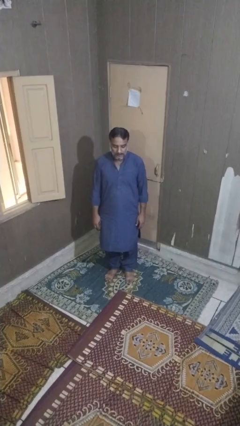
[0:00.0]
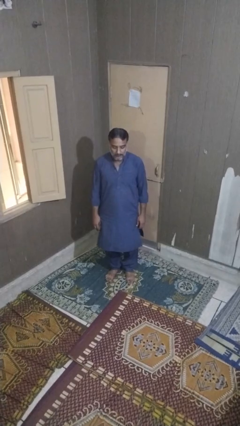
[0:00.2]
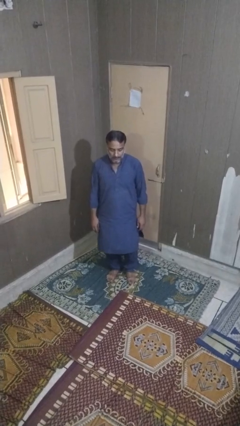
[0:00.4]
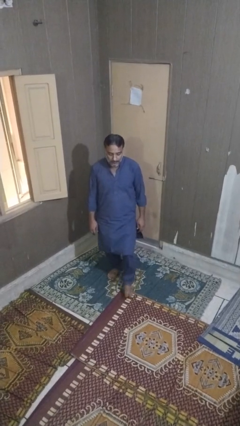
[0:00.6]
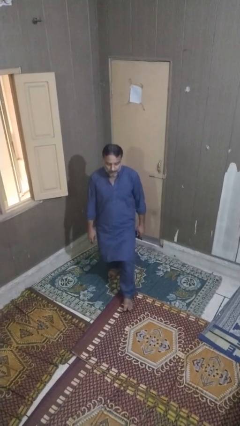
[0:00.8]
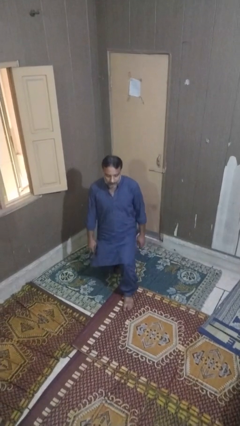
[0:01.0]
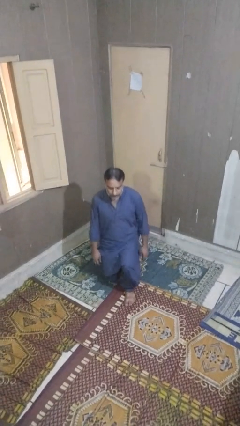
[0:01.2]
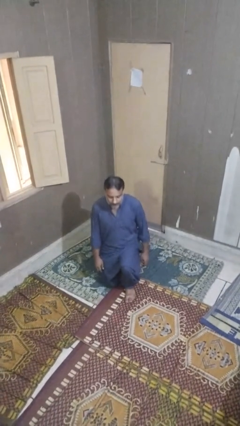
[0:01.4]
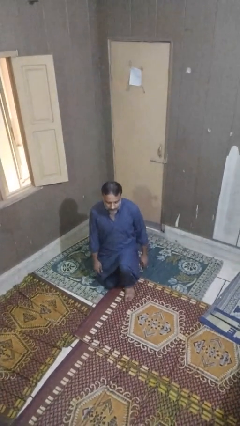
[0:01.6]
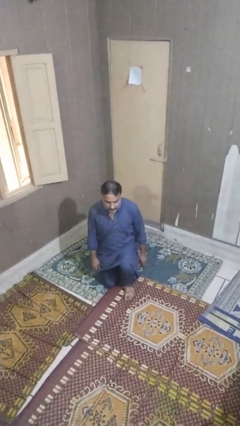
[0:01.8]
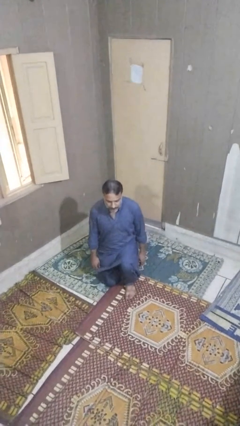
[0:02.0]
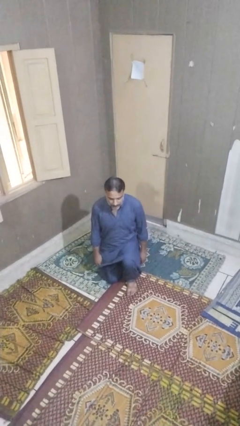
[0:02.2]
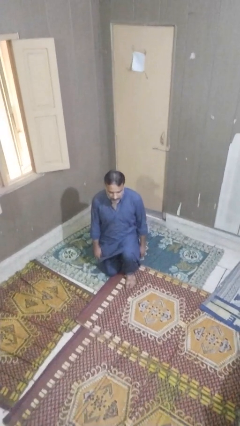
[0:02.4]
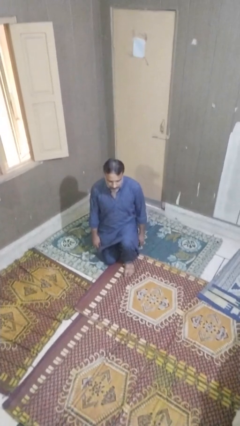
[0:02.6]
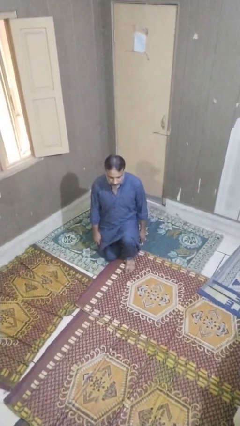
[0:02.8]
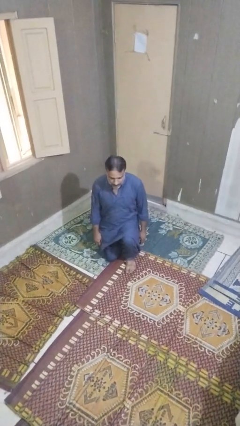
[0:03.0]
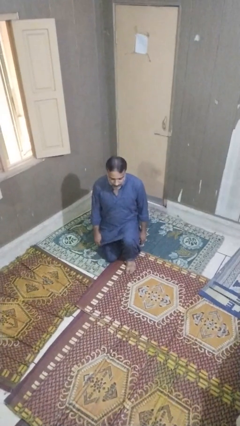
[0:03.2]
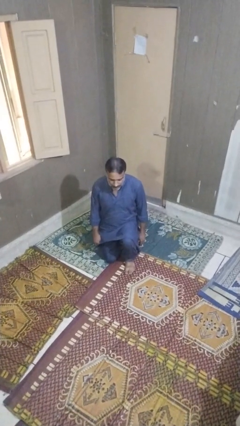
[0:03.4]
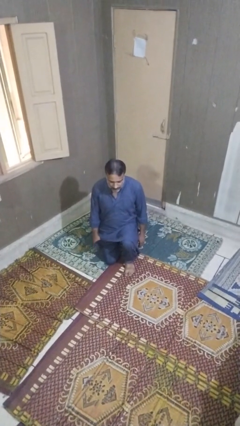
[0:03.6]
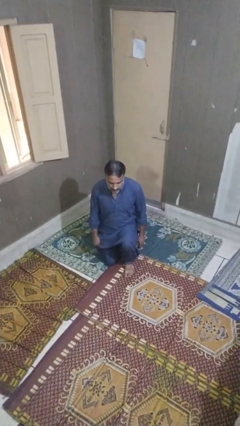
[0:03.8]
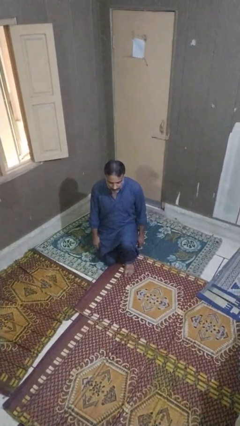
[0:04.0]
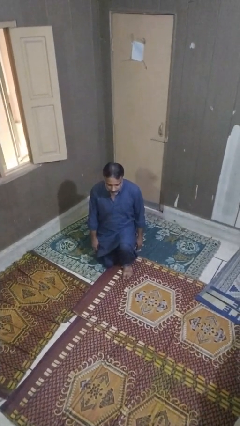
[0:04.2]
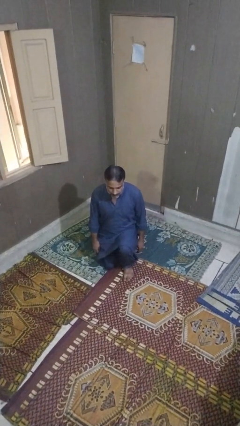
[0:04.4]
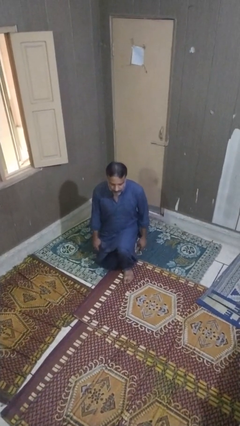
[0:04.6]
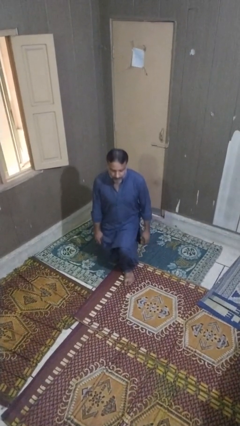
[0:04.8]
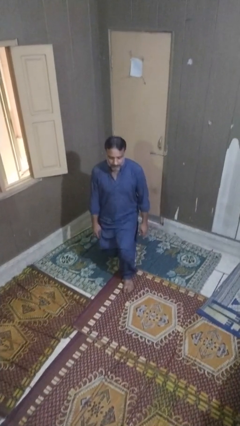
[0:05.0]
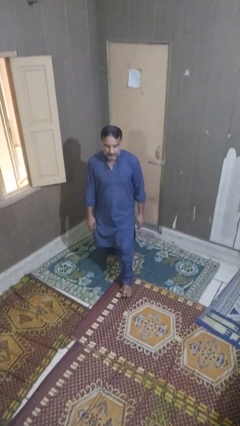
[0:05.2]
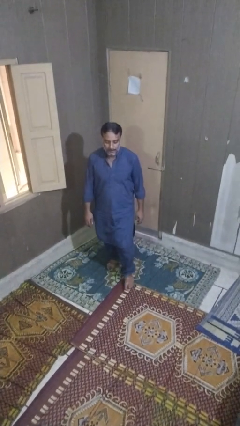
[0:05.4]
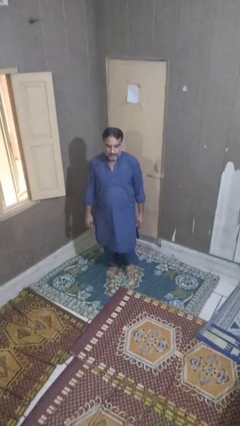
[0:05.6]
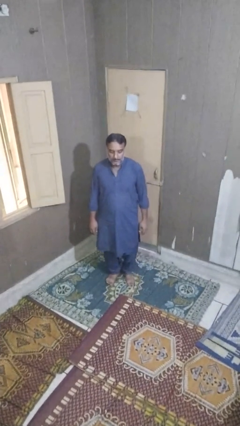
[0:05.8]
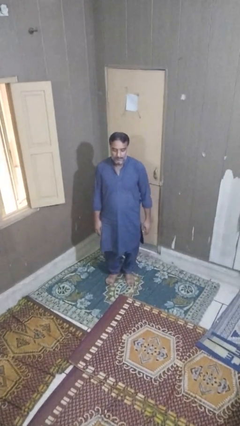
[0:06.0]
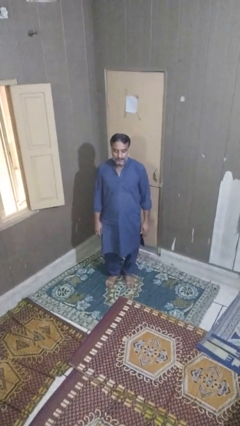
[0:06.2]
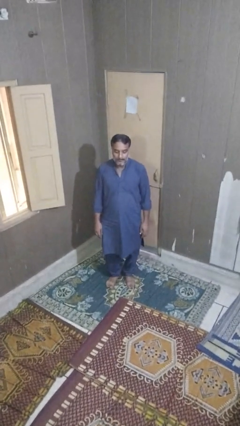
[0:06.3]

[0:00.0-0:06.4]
person exercises with lunges

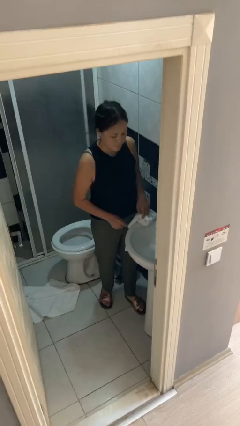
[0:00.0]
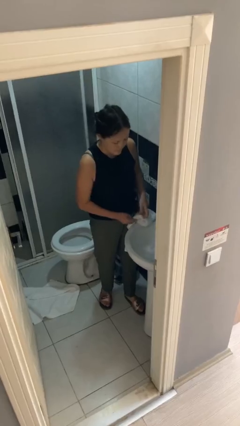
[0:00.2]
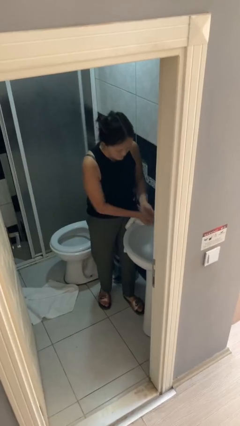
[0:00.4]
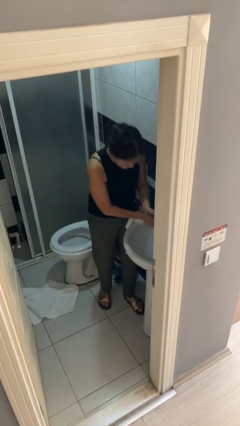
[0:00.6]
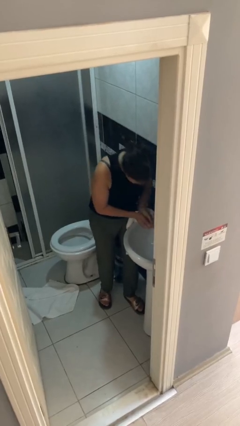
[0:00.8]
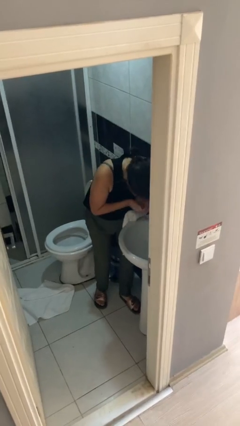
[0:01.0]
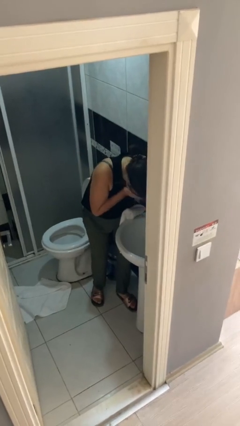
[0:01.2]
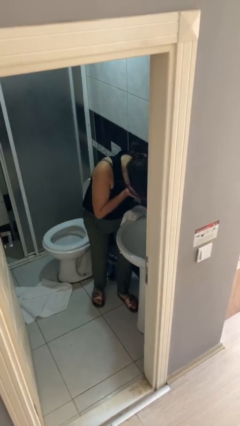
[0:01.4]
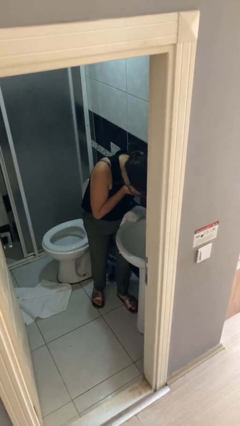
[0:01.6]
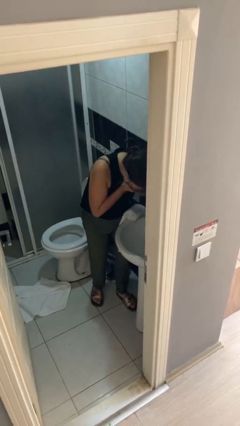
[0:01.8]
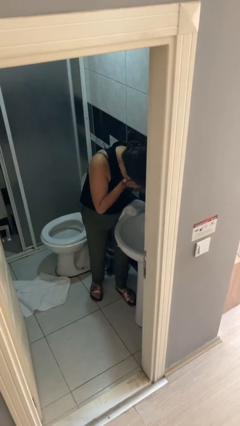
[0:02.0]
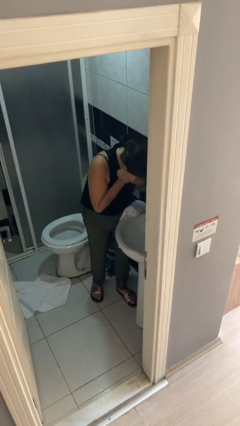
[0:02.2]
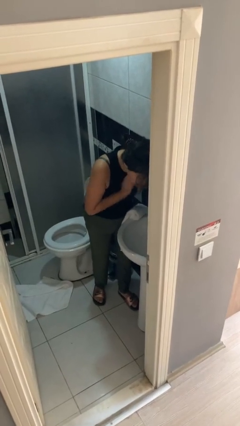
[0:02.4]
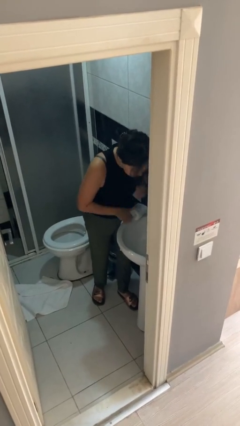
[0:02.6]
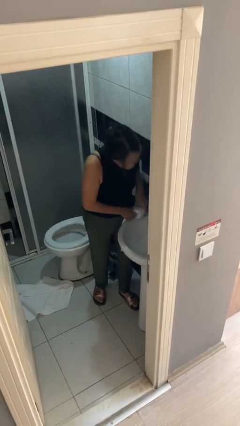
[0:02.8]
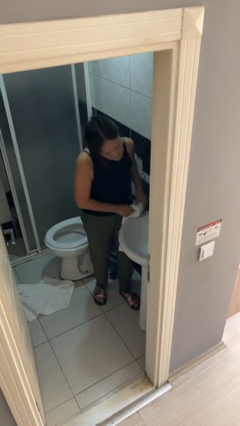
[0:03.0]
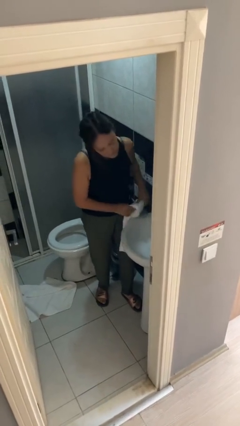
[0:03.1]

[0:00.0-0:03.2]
person washes face

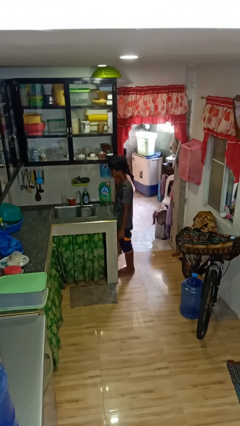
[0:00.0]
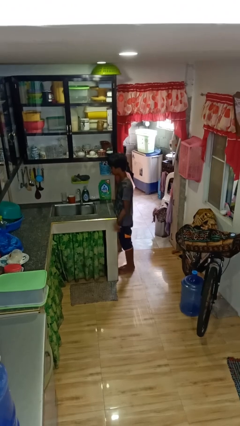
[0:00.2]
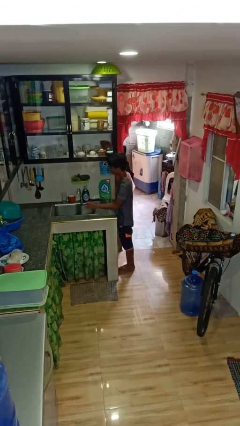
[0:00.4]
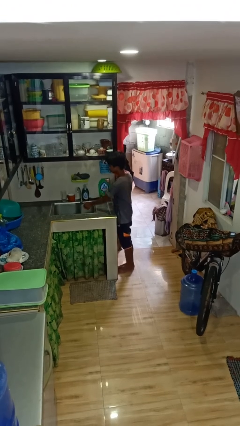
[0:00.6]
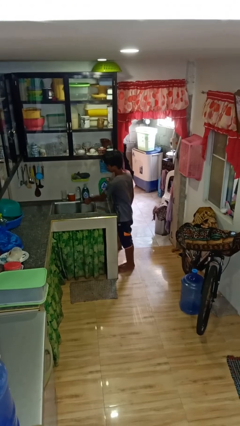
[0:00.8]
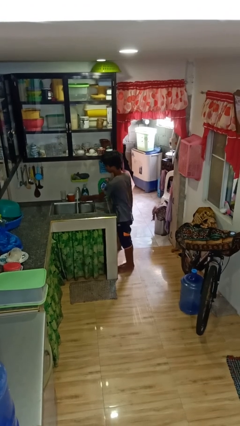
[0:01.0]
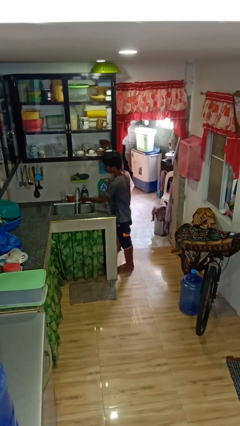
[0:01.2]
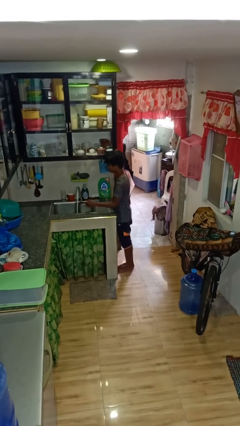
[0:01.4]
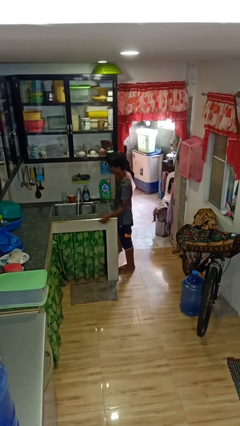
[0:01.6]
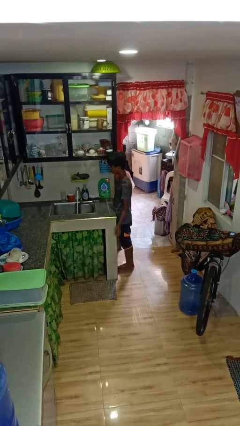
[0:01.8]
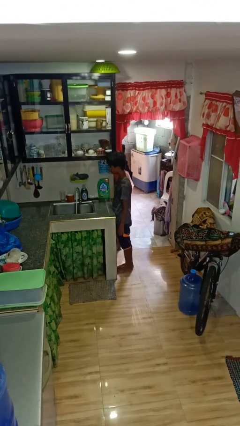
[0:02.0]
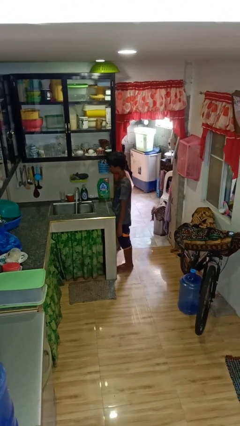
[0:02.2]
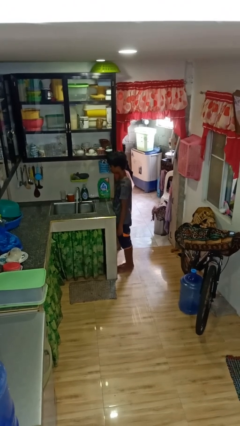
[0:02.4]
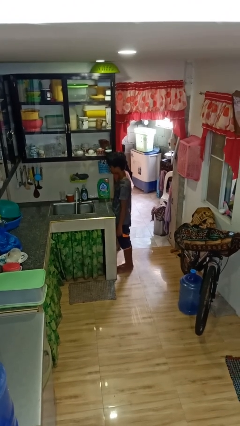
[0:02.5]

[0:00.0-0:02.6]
person turns on faucet

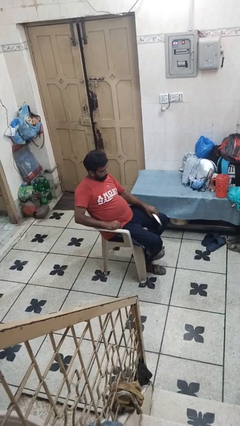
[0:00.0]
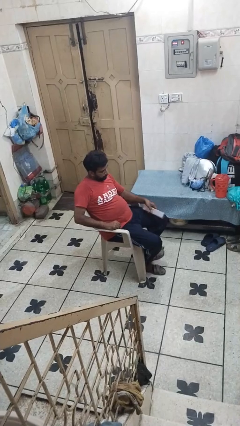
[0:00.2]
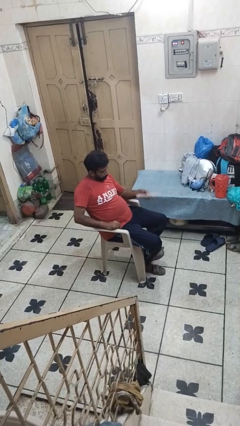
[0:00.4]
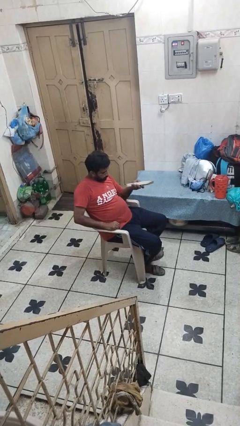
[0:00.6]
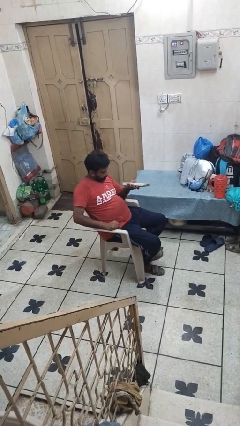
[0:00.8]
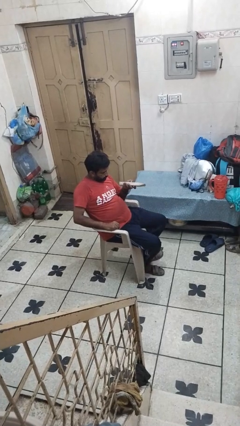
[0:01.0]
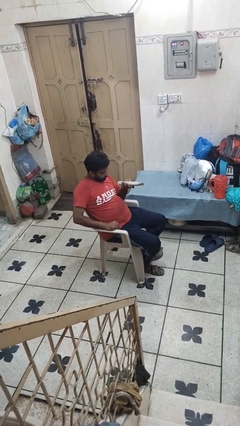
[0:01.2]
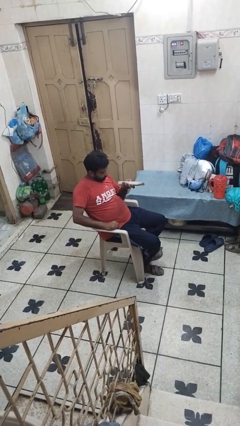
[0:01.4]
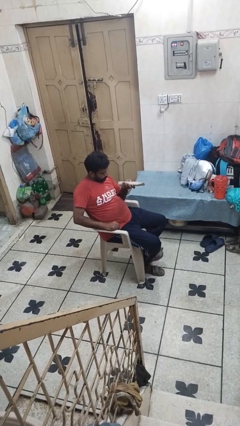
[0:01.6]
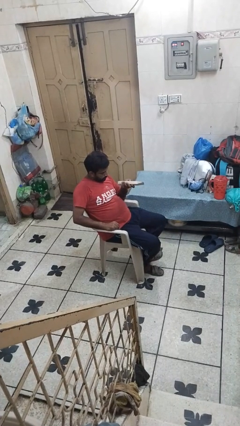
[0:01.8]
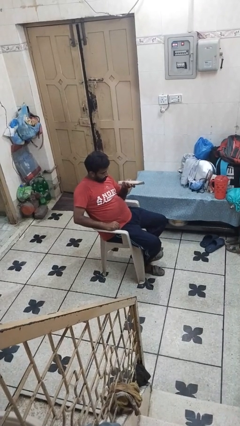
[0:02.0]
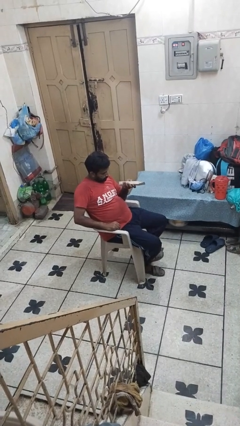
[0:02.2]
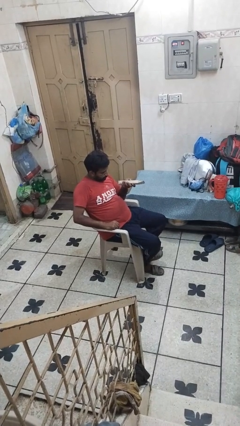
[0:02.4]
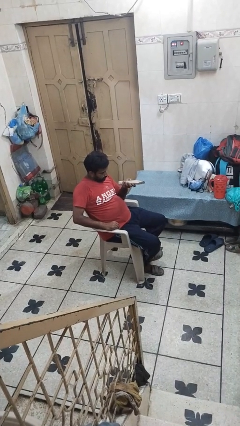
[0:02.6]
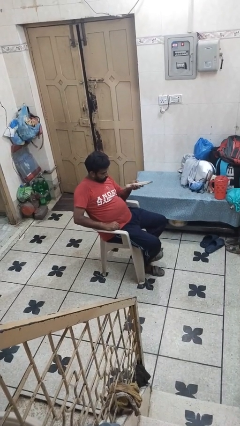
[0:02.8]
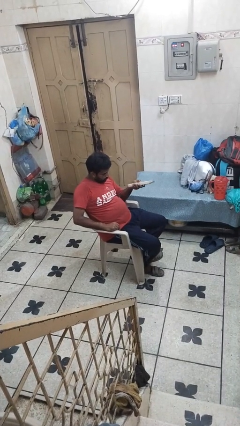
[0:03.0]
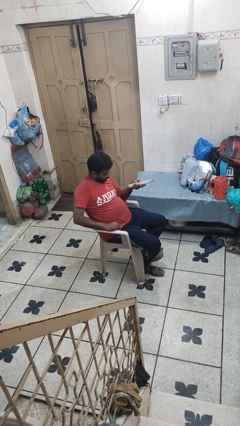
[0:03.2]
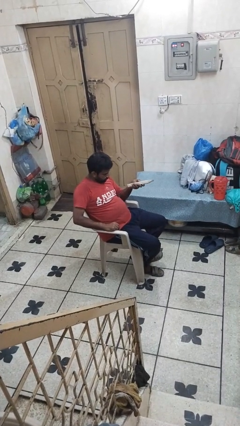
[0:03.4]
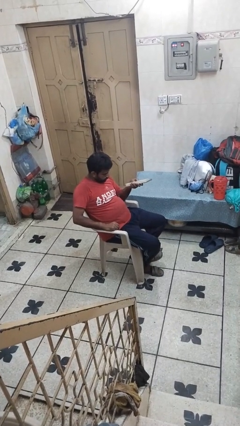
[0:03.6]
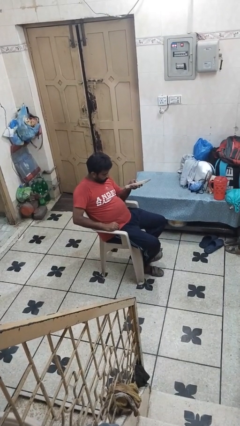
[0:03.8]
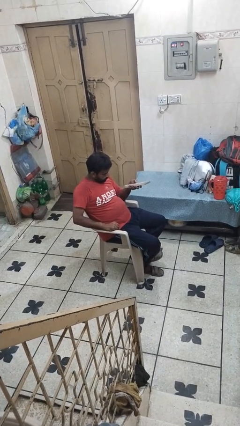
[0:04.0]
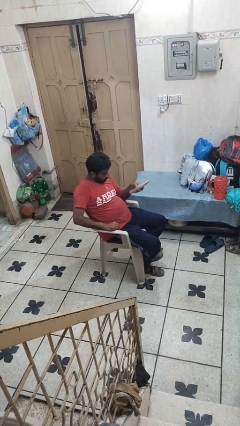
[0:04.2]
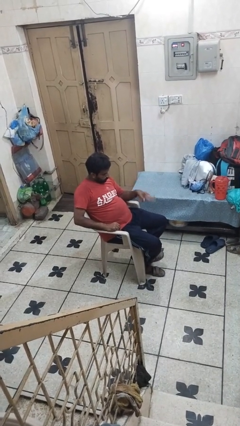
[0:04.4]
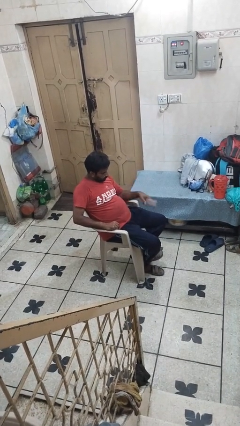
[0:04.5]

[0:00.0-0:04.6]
person uses television remote

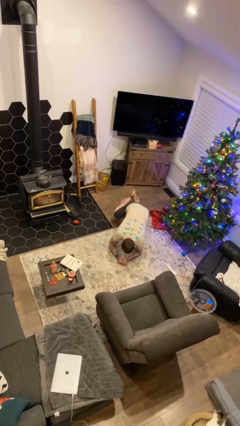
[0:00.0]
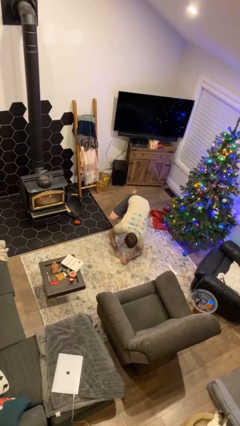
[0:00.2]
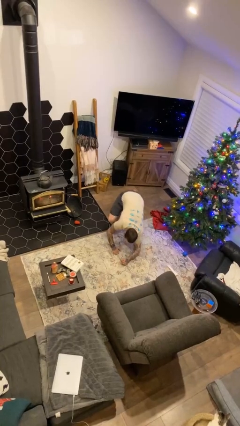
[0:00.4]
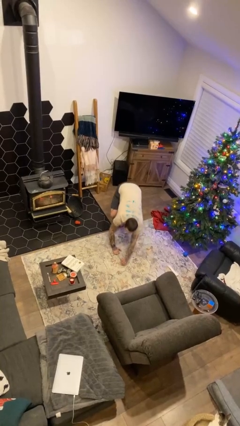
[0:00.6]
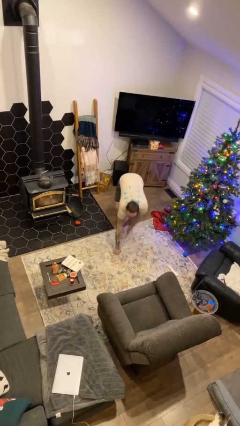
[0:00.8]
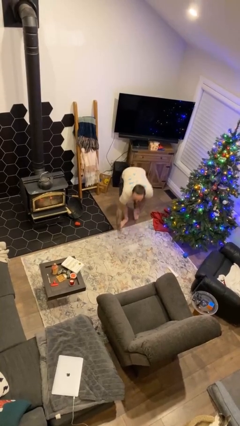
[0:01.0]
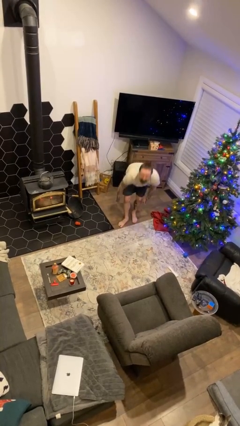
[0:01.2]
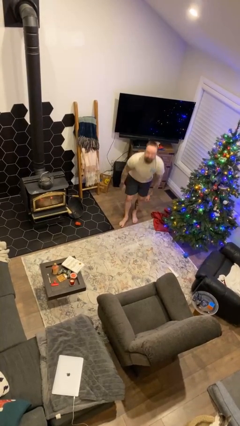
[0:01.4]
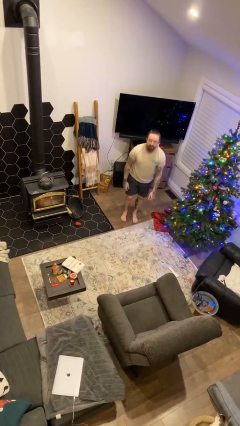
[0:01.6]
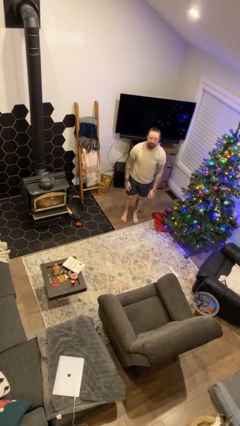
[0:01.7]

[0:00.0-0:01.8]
person stands up from floor
